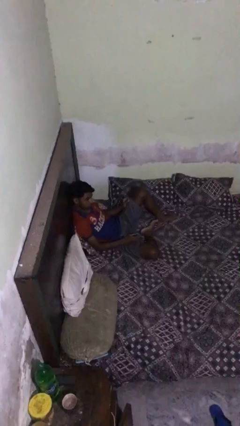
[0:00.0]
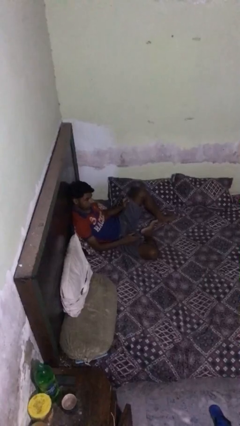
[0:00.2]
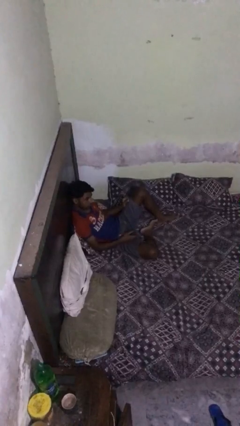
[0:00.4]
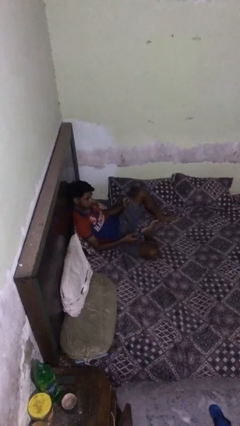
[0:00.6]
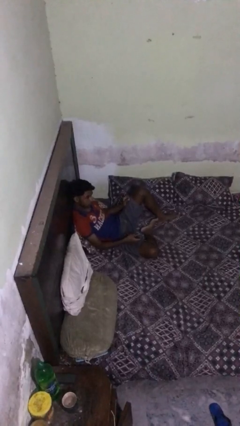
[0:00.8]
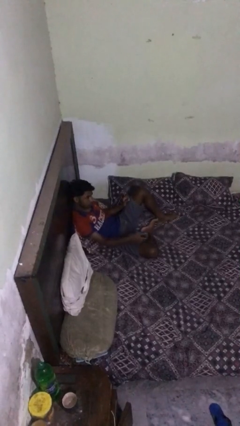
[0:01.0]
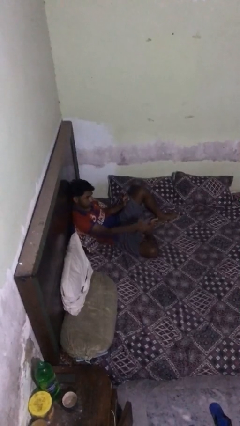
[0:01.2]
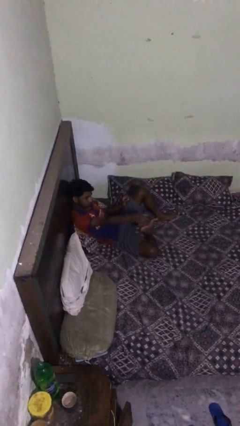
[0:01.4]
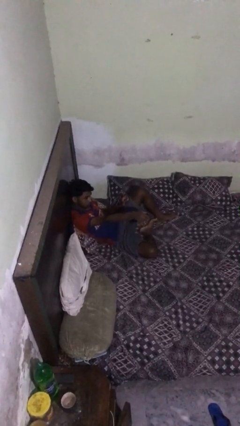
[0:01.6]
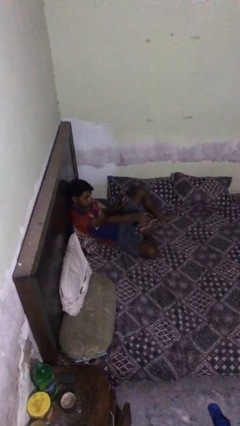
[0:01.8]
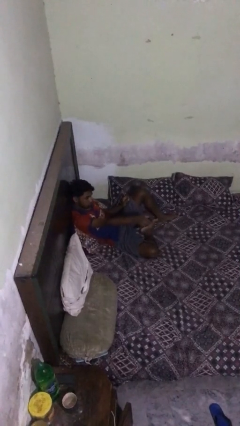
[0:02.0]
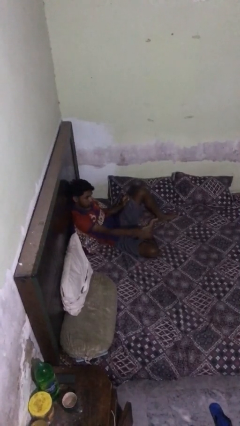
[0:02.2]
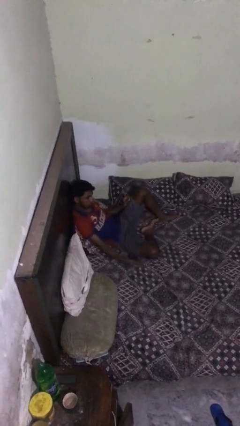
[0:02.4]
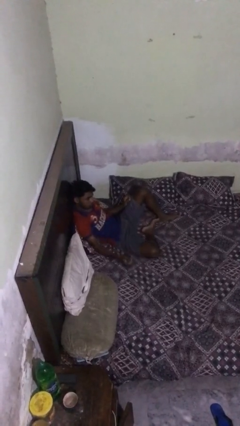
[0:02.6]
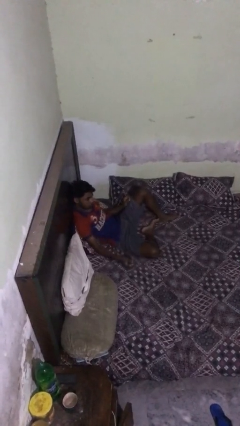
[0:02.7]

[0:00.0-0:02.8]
person uses television remote

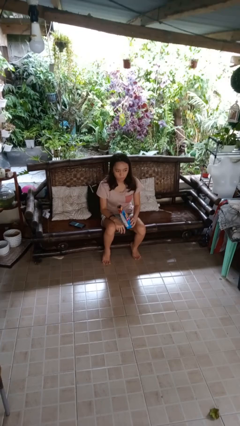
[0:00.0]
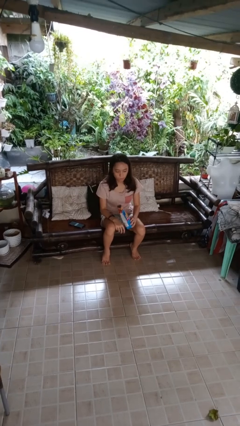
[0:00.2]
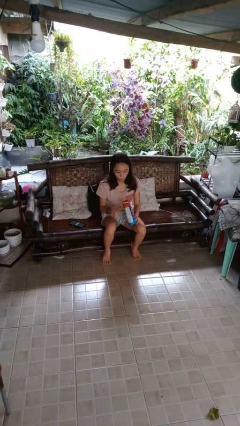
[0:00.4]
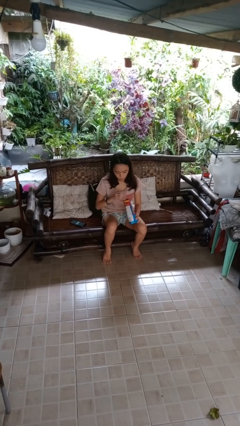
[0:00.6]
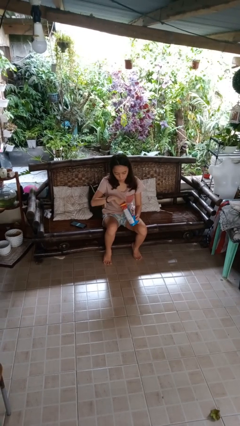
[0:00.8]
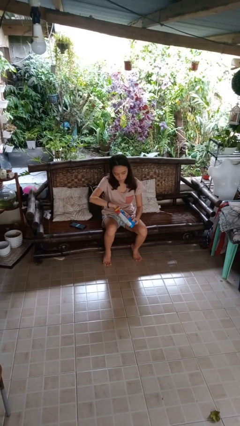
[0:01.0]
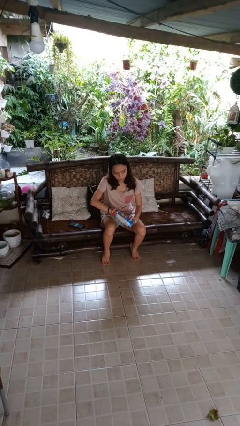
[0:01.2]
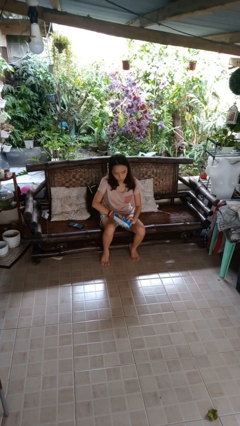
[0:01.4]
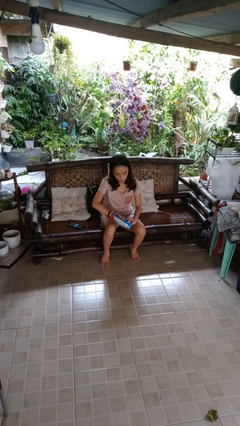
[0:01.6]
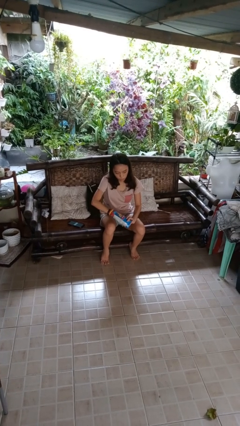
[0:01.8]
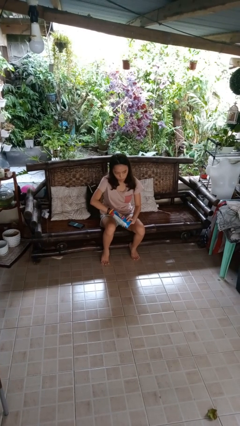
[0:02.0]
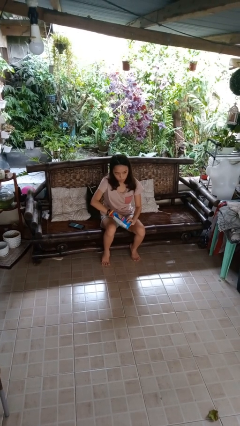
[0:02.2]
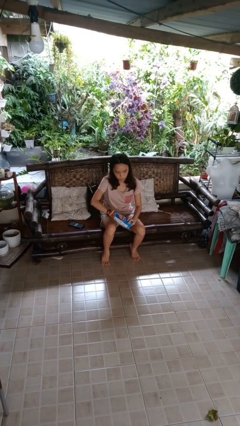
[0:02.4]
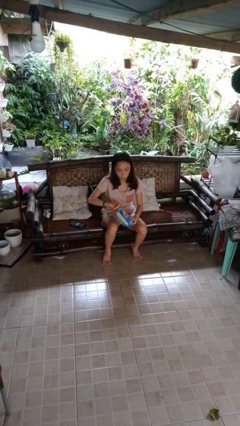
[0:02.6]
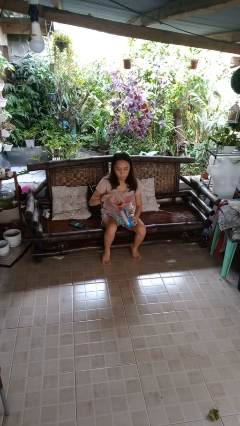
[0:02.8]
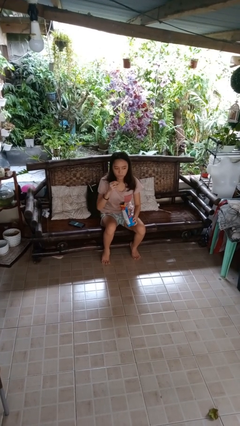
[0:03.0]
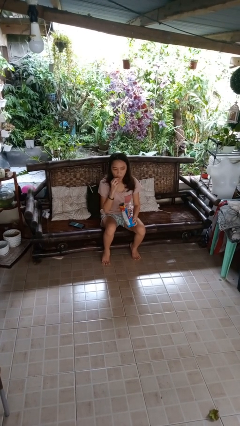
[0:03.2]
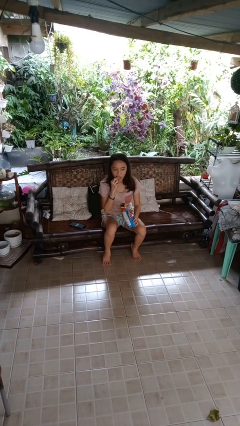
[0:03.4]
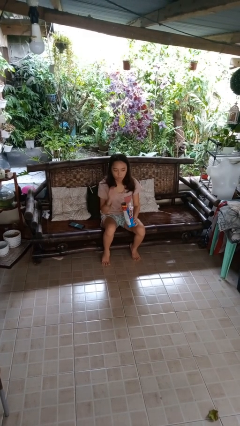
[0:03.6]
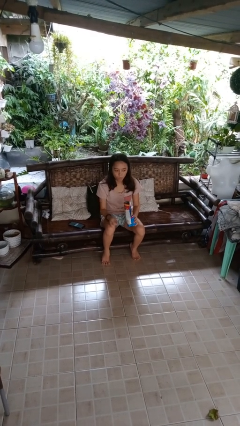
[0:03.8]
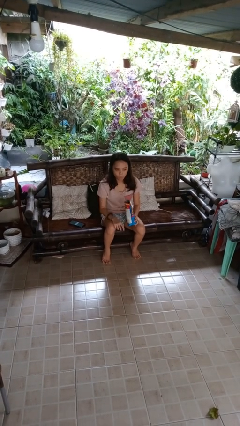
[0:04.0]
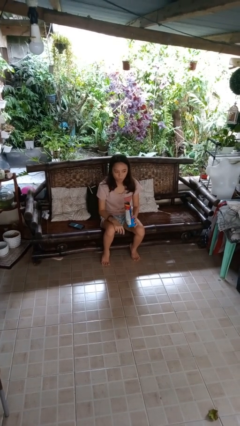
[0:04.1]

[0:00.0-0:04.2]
person eats snack from bag

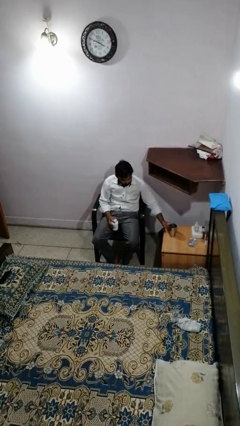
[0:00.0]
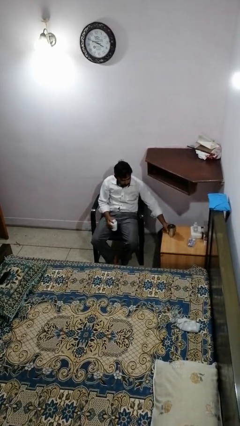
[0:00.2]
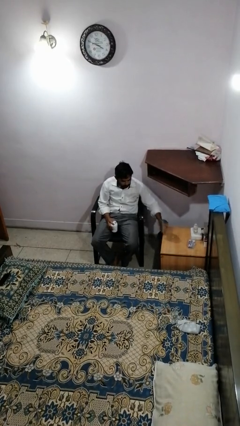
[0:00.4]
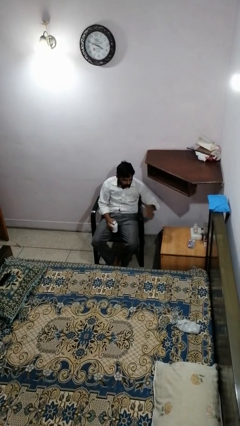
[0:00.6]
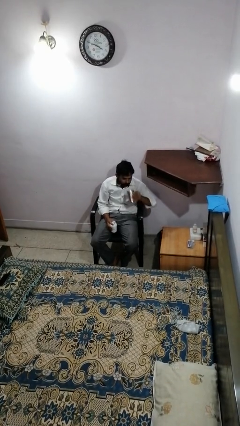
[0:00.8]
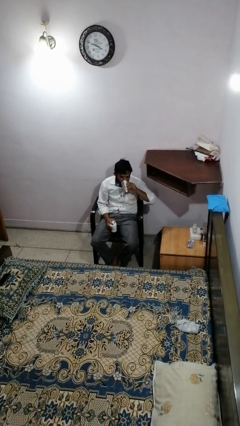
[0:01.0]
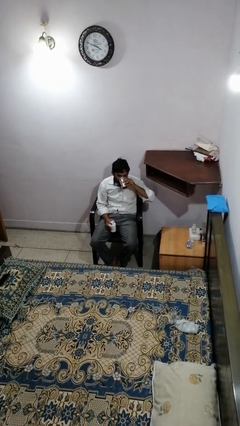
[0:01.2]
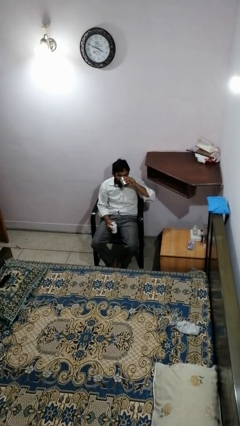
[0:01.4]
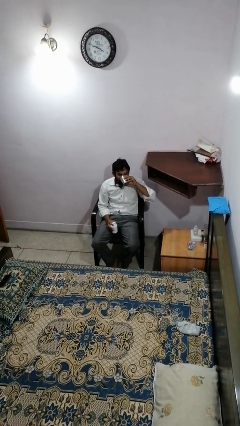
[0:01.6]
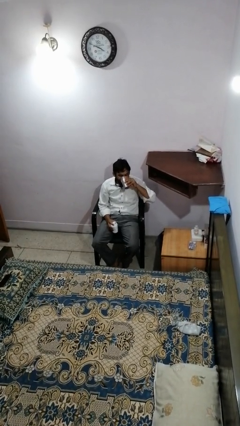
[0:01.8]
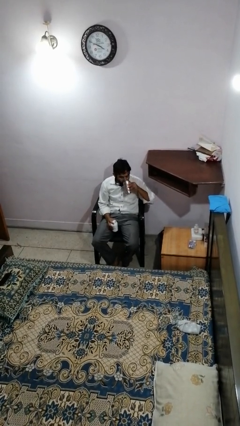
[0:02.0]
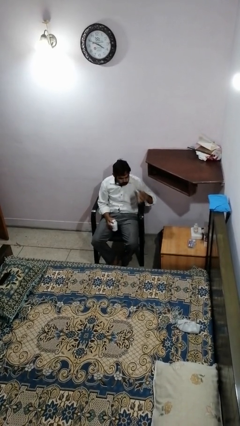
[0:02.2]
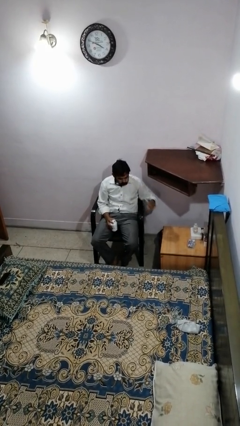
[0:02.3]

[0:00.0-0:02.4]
person drinks from cup

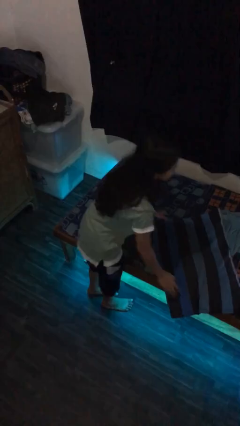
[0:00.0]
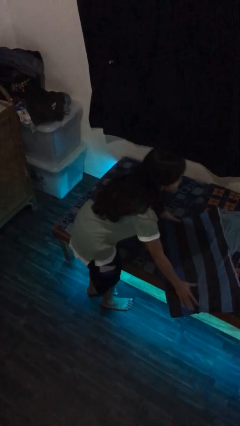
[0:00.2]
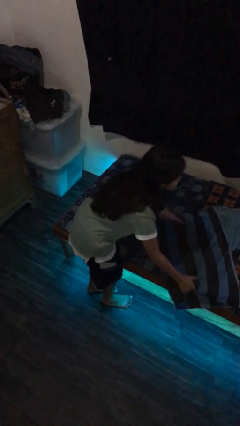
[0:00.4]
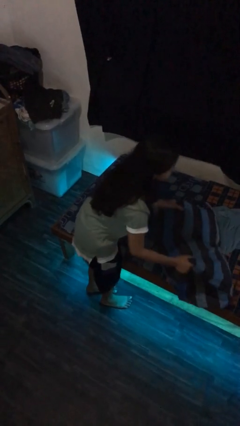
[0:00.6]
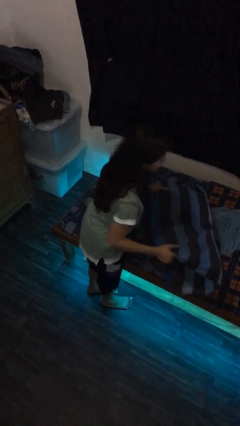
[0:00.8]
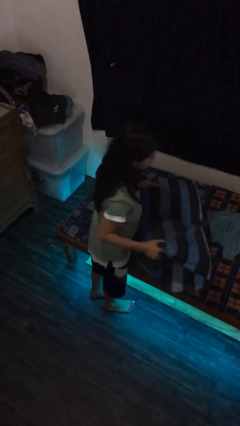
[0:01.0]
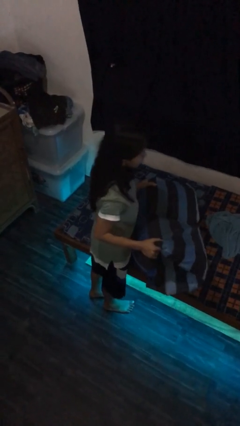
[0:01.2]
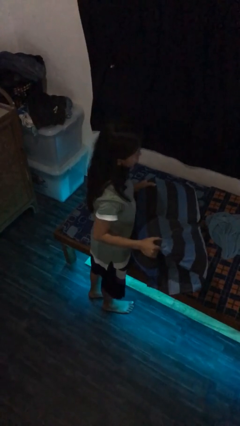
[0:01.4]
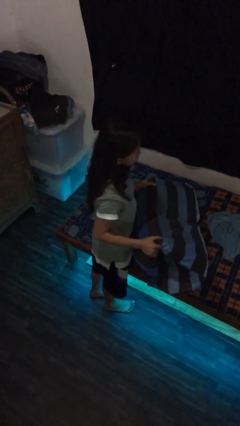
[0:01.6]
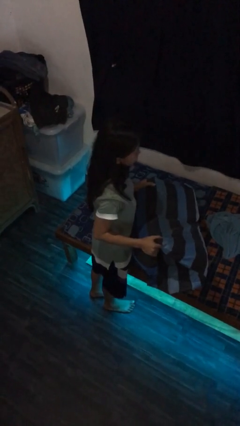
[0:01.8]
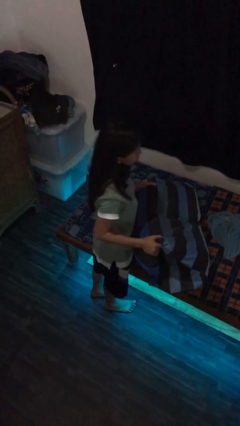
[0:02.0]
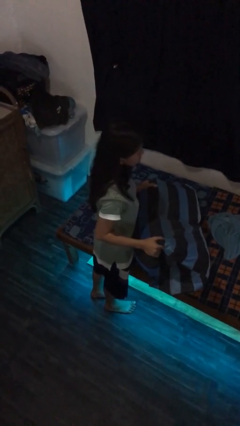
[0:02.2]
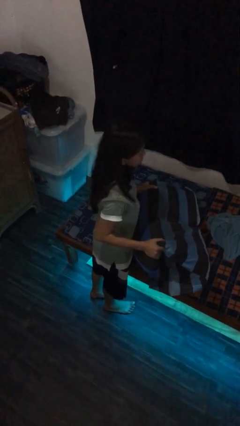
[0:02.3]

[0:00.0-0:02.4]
person picks up object from bed

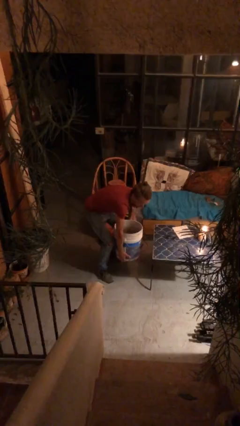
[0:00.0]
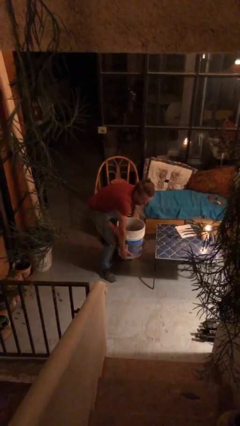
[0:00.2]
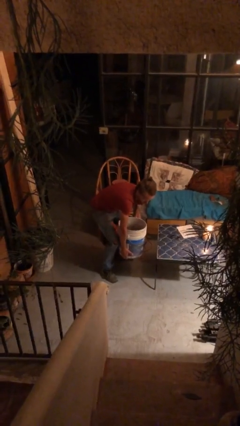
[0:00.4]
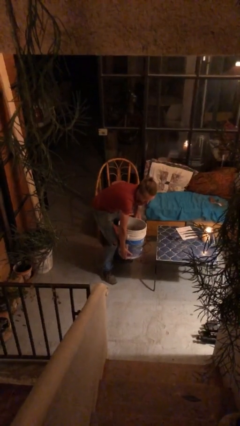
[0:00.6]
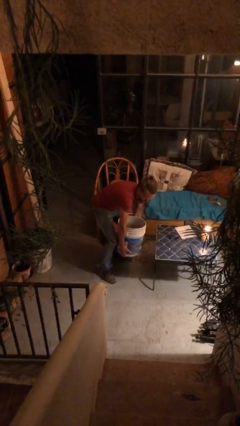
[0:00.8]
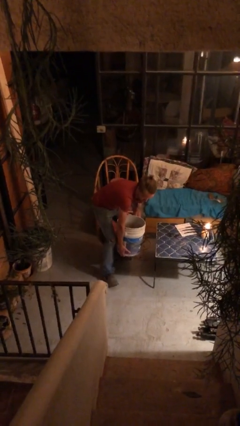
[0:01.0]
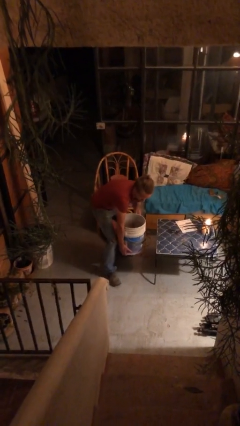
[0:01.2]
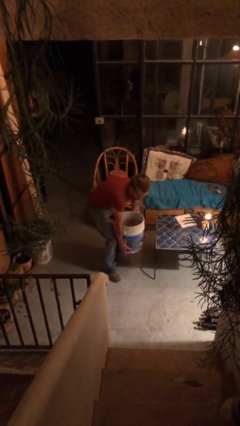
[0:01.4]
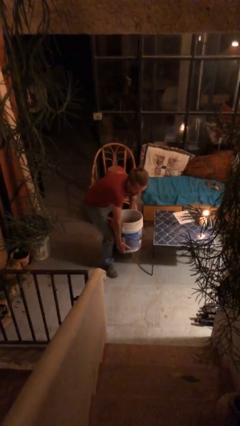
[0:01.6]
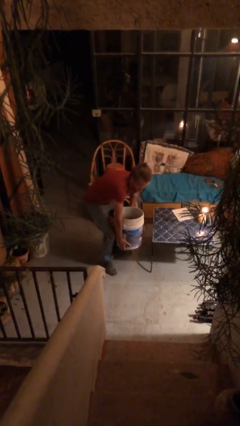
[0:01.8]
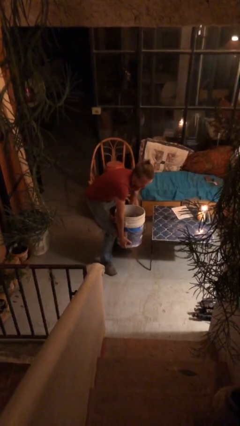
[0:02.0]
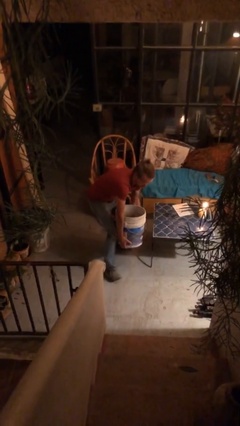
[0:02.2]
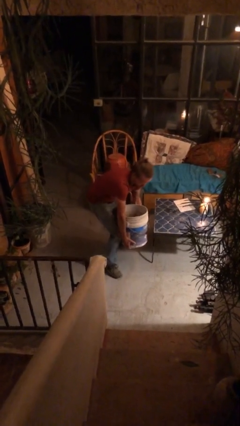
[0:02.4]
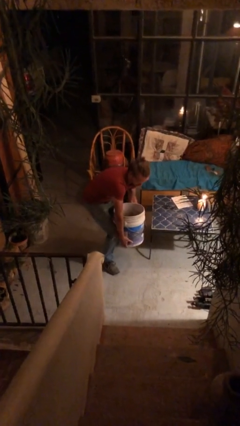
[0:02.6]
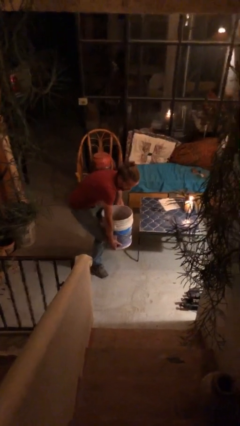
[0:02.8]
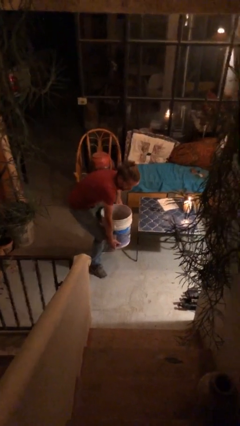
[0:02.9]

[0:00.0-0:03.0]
person carries heavy object

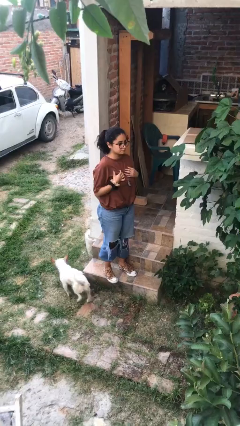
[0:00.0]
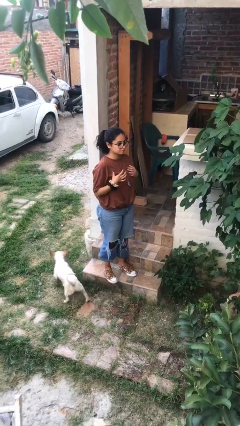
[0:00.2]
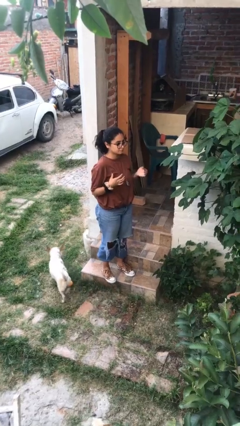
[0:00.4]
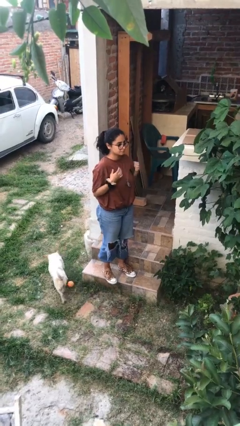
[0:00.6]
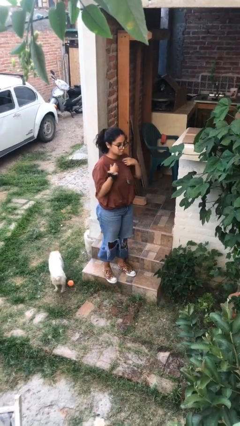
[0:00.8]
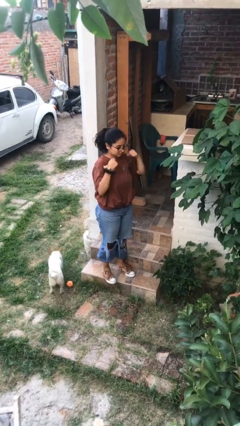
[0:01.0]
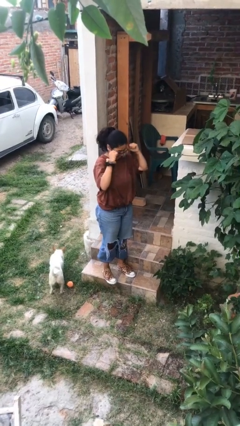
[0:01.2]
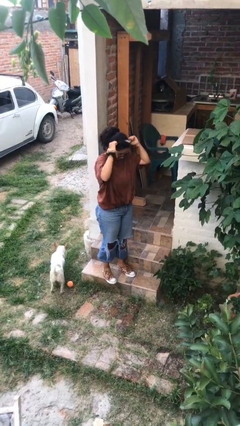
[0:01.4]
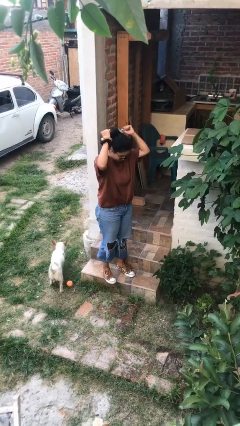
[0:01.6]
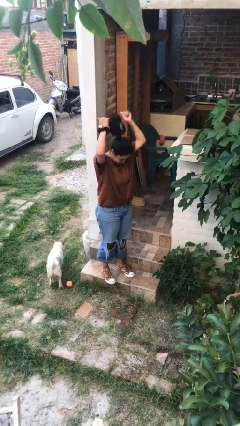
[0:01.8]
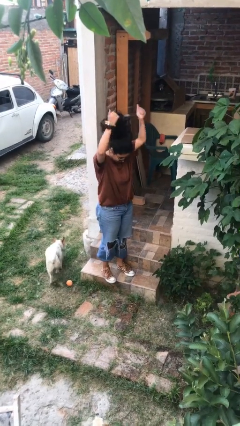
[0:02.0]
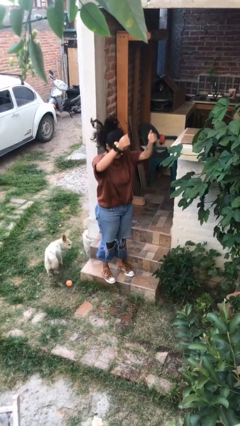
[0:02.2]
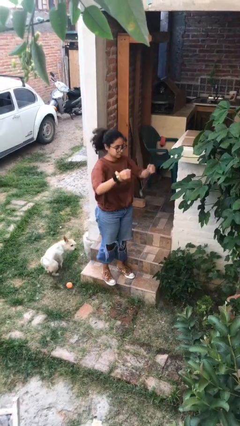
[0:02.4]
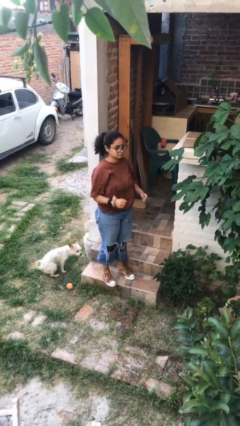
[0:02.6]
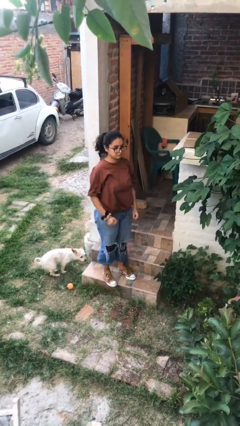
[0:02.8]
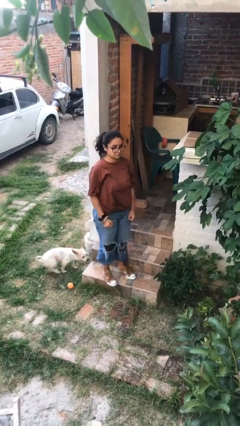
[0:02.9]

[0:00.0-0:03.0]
person takes off necklace
